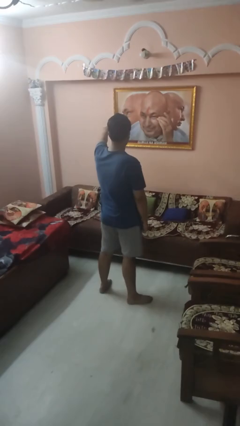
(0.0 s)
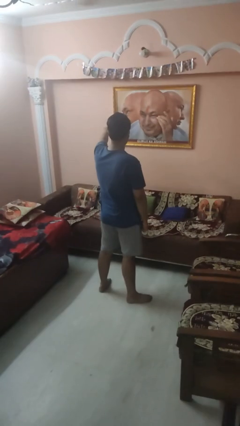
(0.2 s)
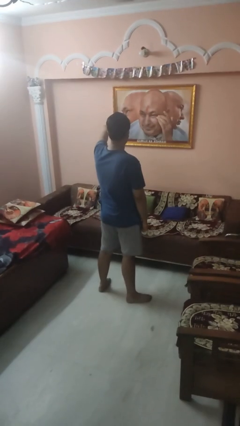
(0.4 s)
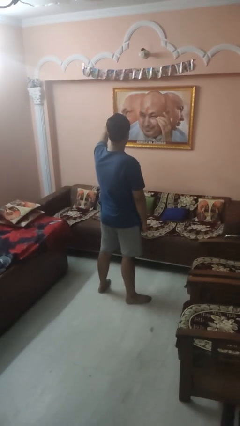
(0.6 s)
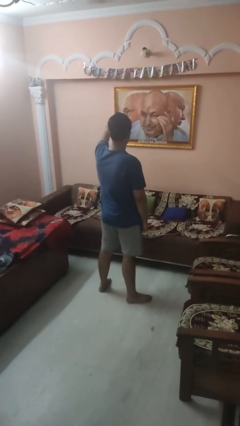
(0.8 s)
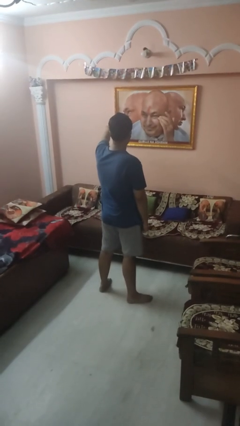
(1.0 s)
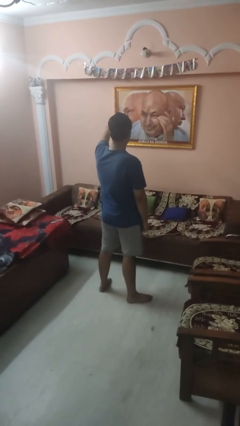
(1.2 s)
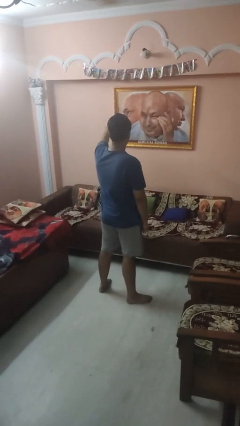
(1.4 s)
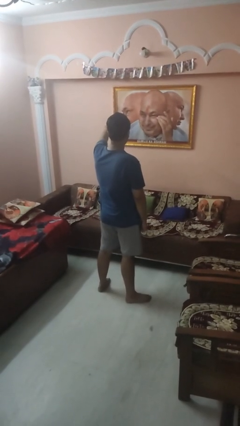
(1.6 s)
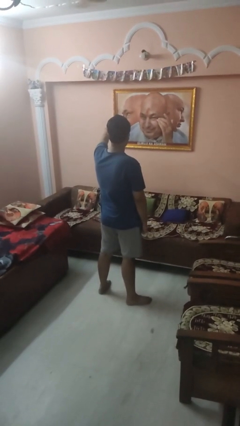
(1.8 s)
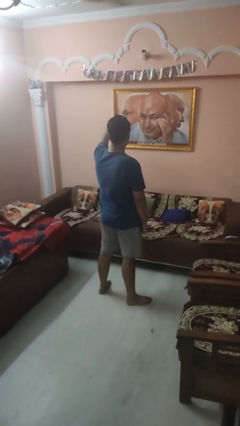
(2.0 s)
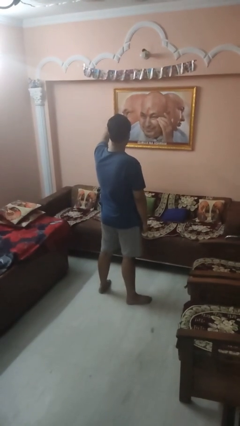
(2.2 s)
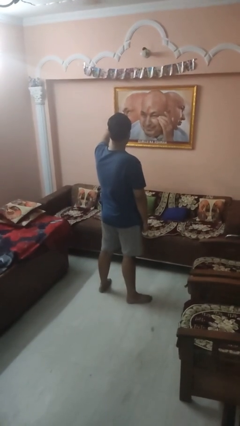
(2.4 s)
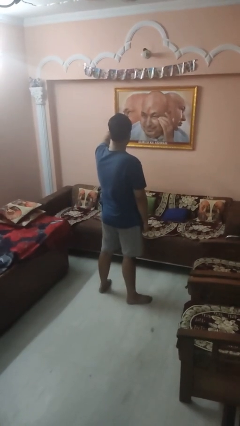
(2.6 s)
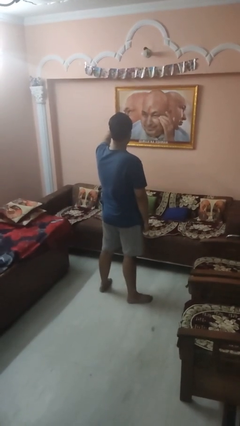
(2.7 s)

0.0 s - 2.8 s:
person points at person

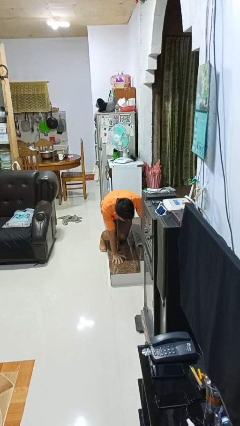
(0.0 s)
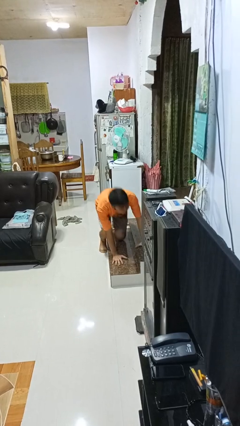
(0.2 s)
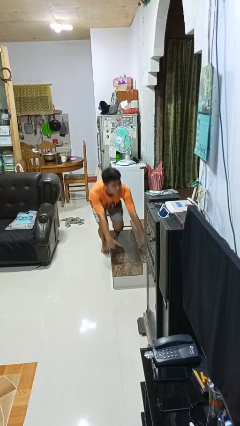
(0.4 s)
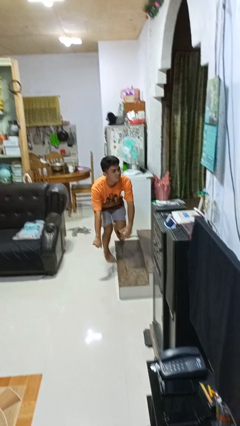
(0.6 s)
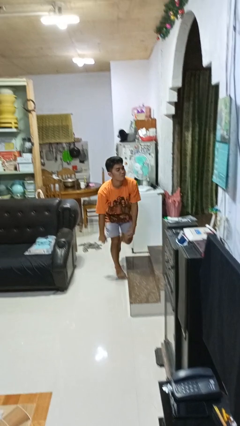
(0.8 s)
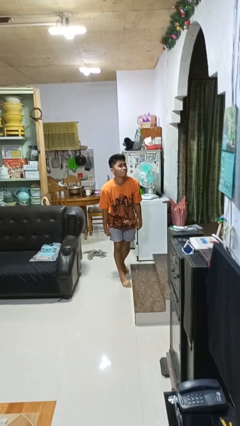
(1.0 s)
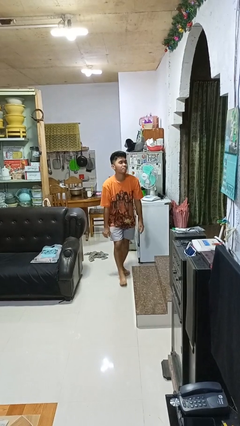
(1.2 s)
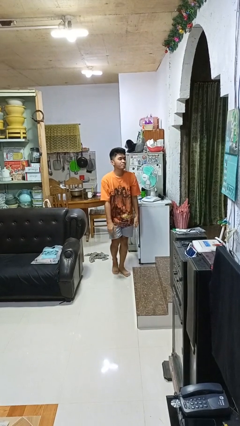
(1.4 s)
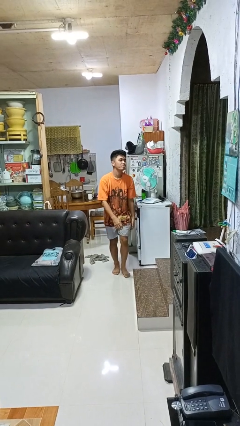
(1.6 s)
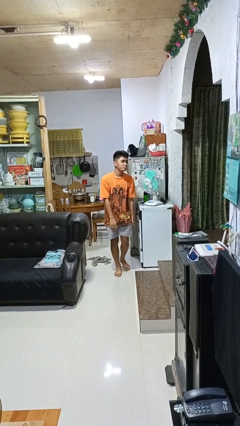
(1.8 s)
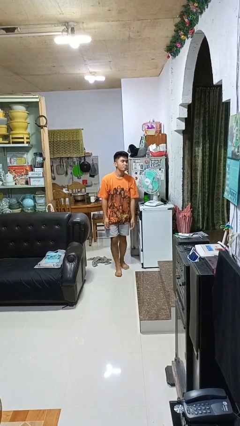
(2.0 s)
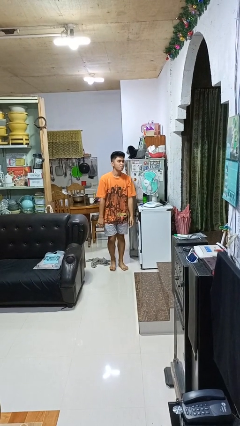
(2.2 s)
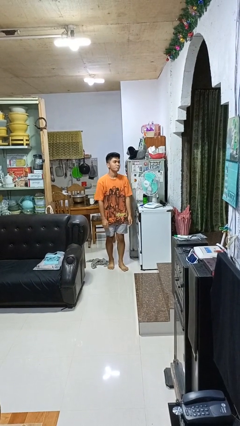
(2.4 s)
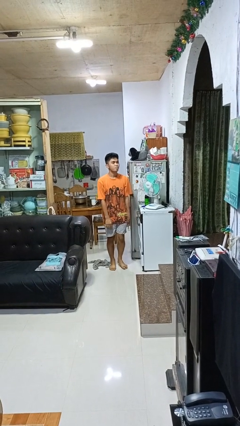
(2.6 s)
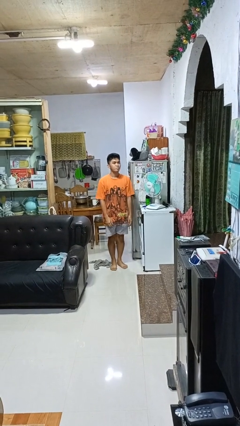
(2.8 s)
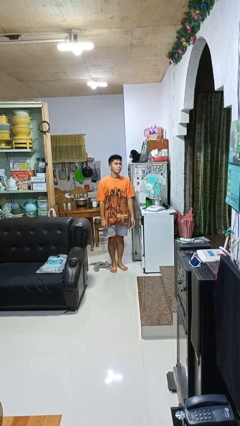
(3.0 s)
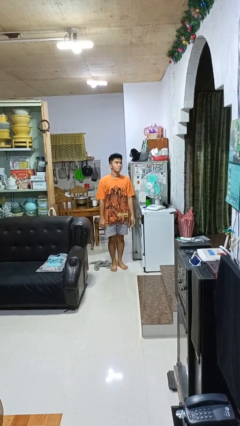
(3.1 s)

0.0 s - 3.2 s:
person stands up from floor

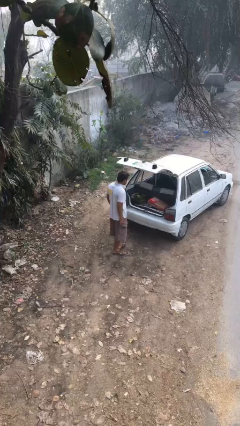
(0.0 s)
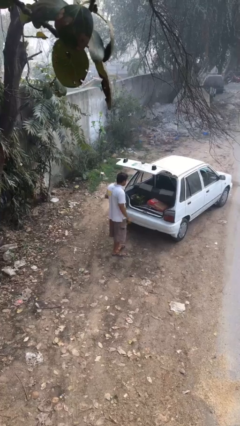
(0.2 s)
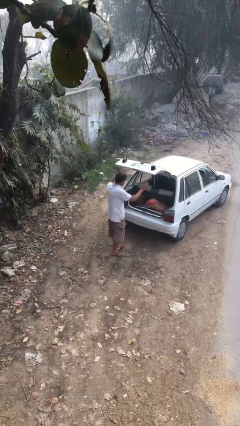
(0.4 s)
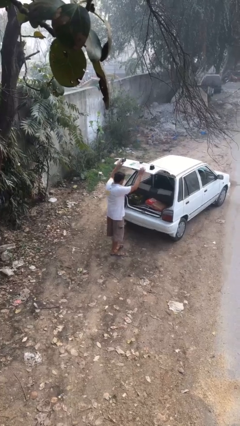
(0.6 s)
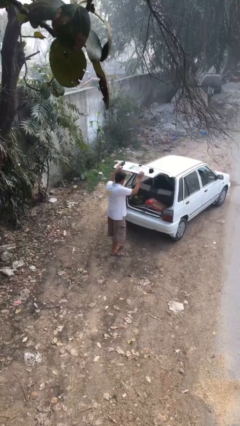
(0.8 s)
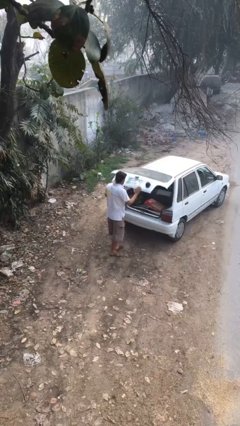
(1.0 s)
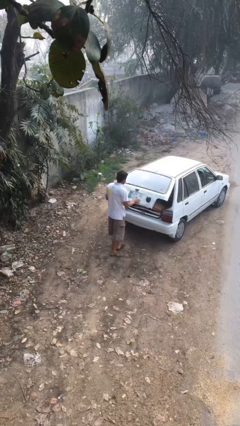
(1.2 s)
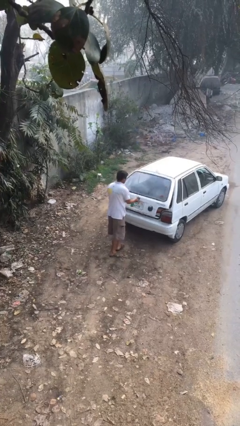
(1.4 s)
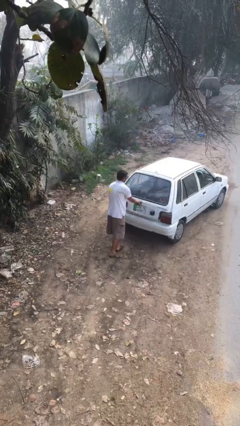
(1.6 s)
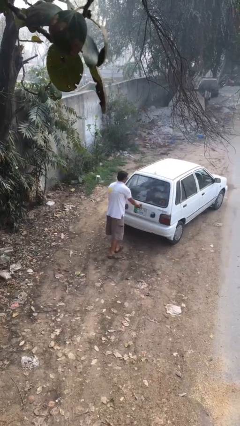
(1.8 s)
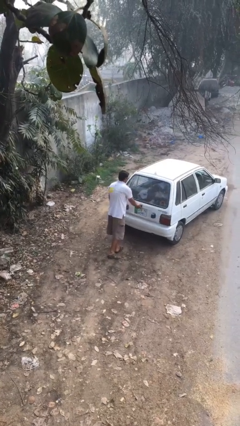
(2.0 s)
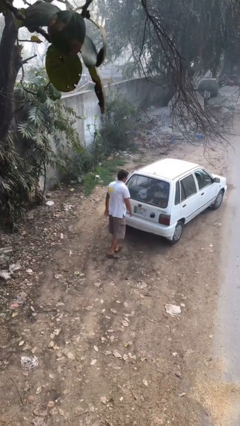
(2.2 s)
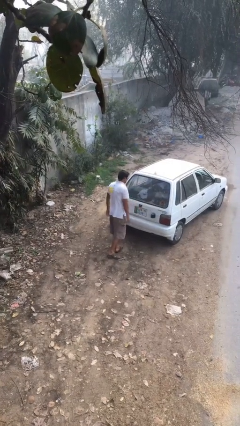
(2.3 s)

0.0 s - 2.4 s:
person closes car trunk

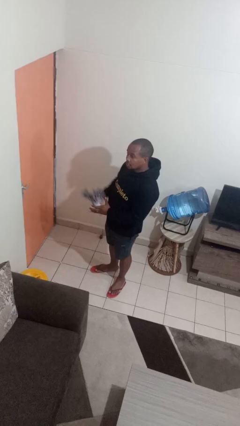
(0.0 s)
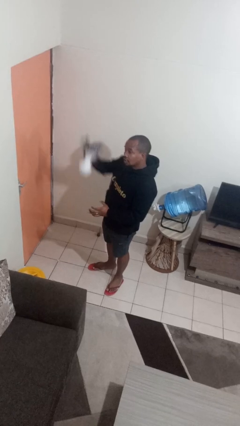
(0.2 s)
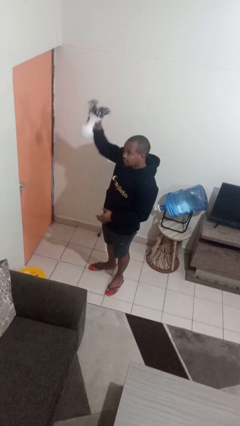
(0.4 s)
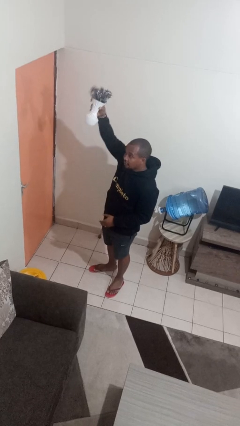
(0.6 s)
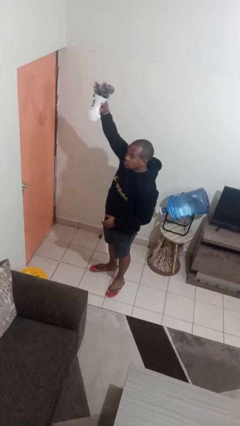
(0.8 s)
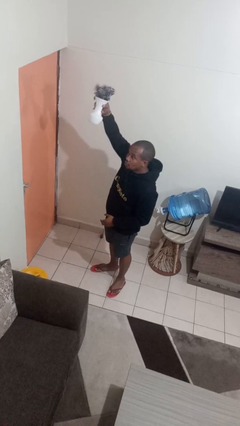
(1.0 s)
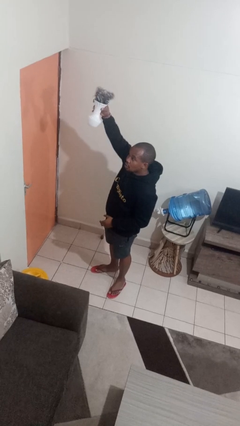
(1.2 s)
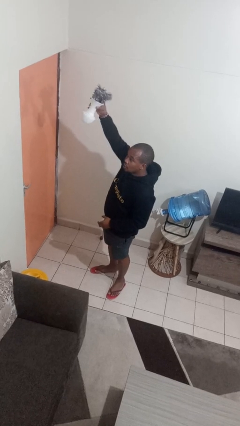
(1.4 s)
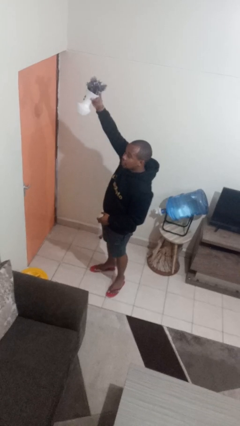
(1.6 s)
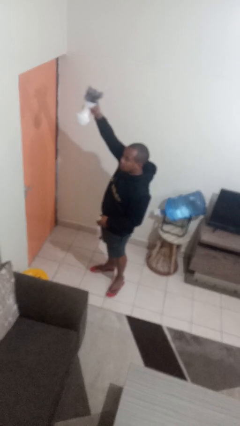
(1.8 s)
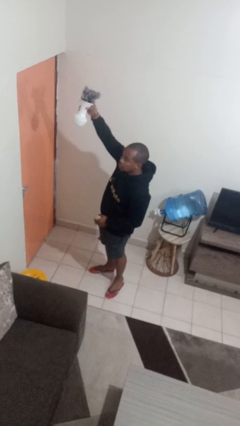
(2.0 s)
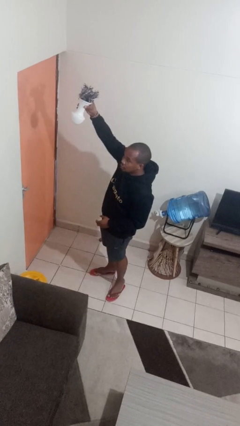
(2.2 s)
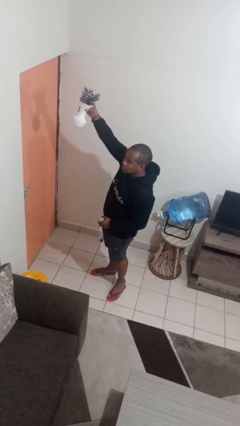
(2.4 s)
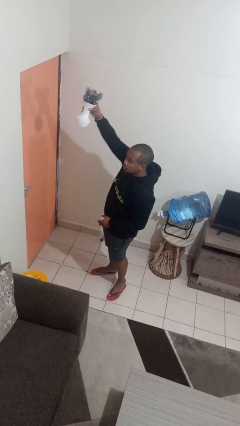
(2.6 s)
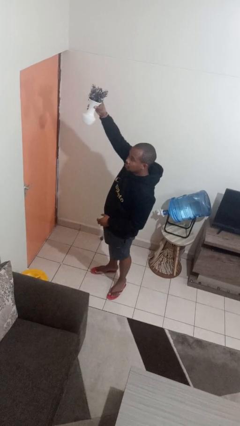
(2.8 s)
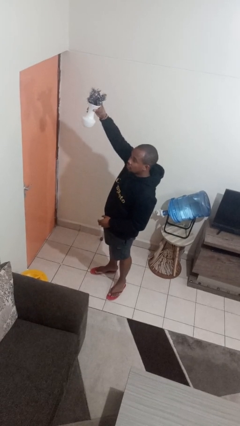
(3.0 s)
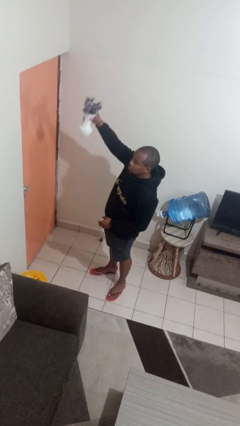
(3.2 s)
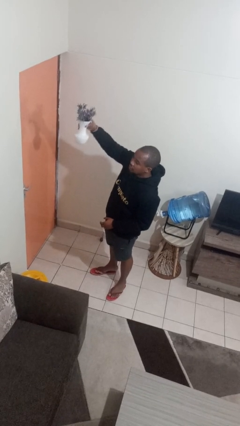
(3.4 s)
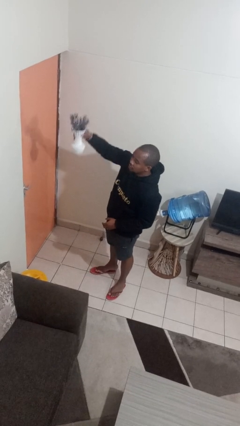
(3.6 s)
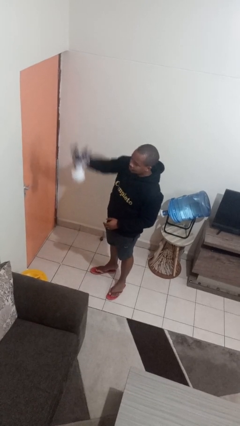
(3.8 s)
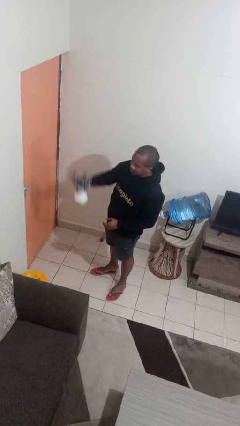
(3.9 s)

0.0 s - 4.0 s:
person holds object above head

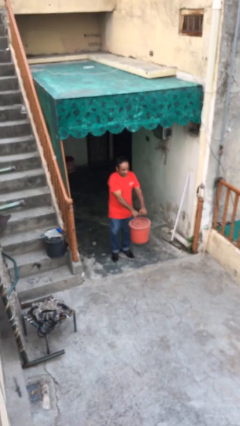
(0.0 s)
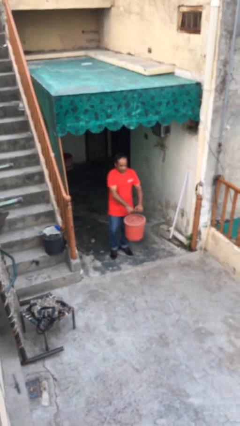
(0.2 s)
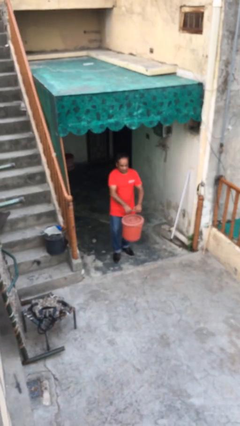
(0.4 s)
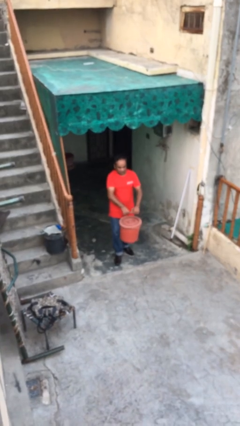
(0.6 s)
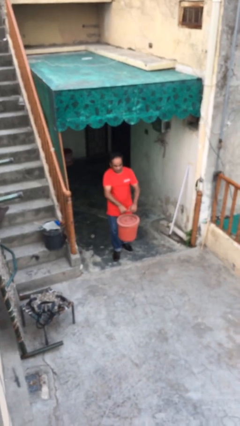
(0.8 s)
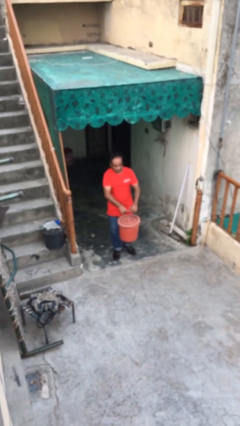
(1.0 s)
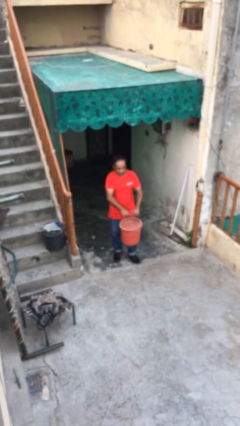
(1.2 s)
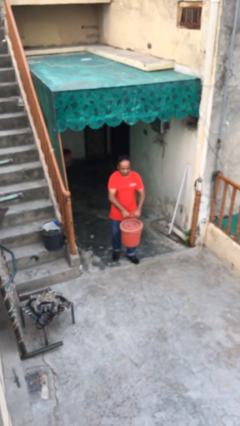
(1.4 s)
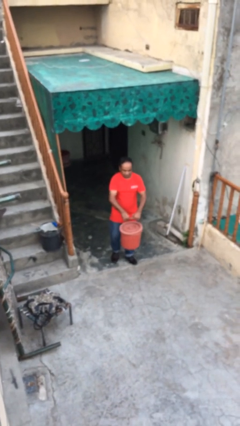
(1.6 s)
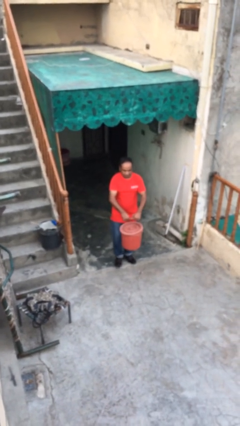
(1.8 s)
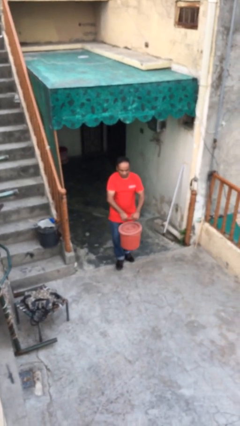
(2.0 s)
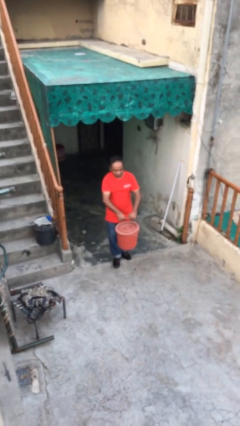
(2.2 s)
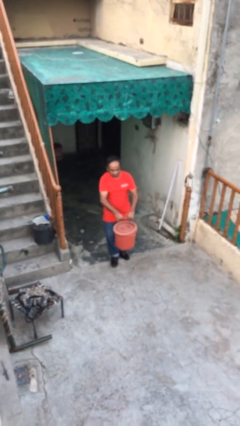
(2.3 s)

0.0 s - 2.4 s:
person carries heavy object

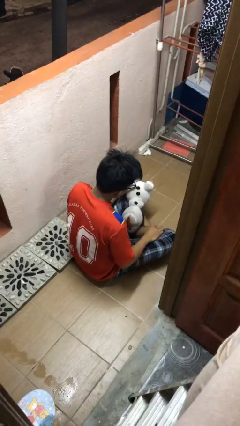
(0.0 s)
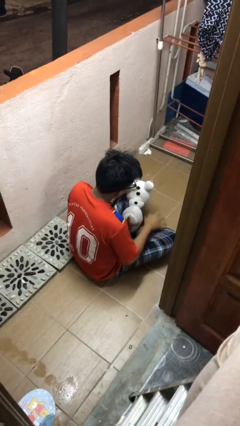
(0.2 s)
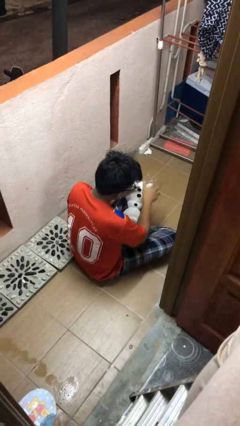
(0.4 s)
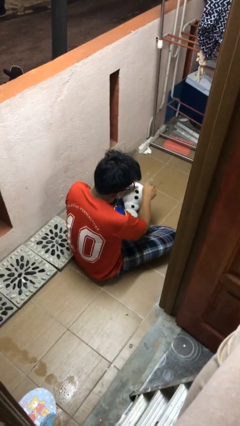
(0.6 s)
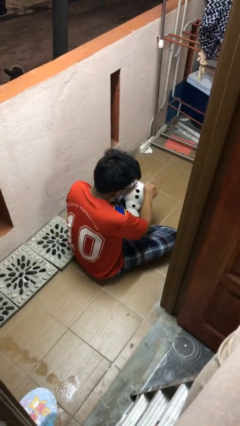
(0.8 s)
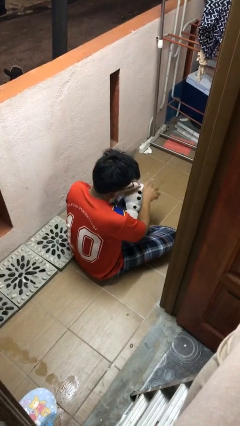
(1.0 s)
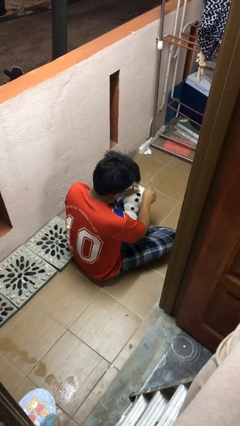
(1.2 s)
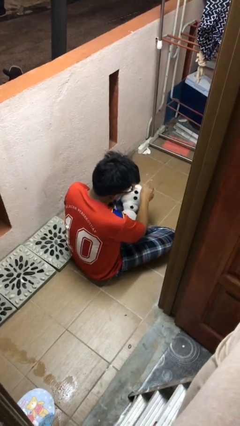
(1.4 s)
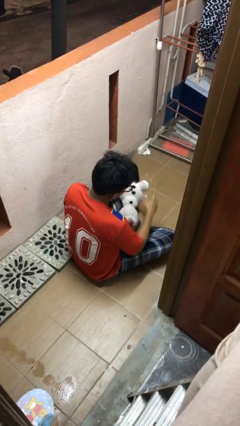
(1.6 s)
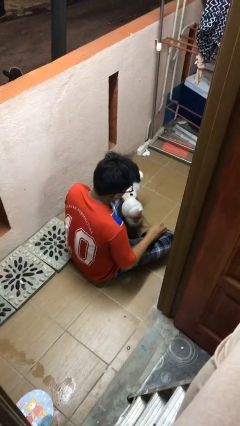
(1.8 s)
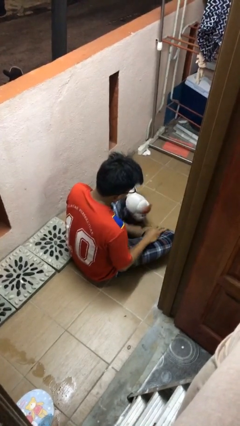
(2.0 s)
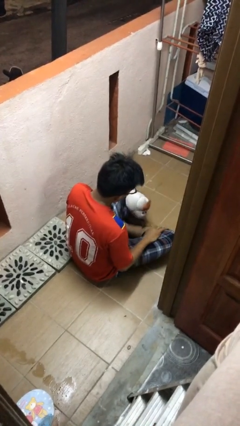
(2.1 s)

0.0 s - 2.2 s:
person squeezes object

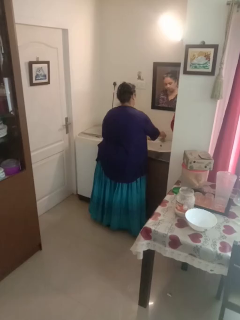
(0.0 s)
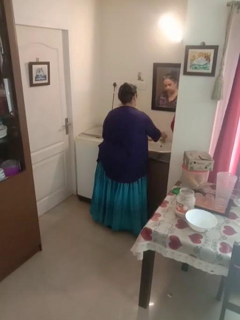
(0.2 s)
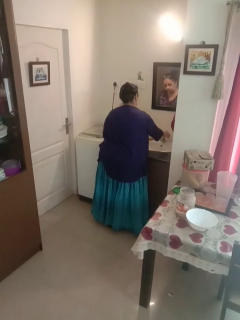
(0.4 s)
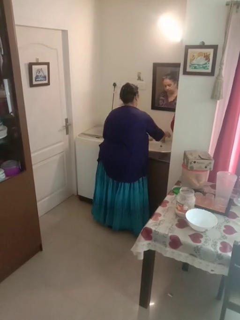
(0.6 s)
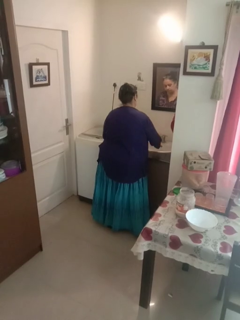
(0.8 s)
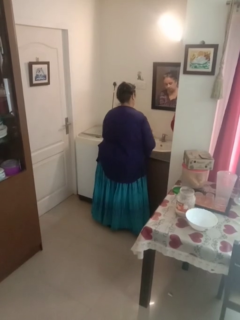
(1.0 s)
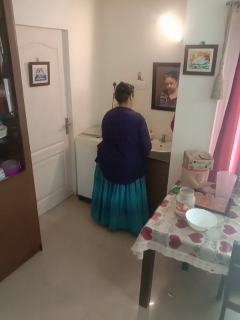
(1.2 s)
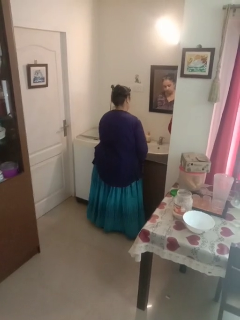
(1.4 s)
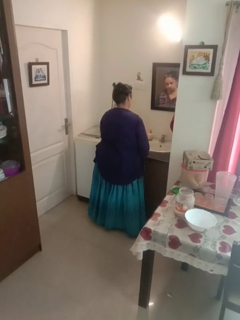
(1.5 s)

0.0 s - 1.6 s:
person turns on faucet
